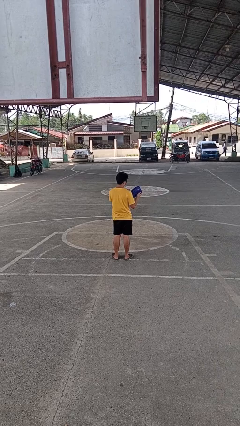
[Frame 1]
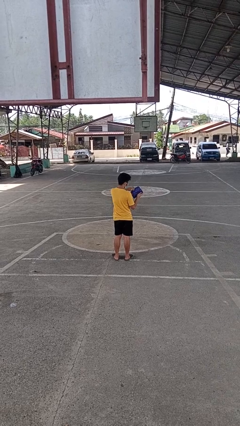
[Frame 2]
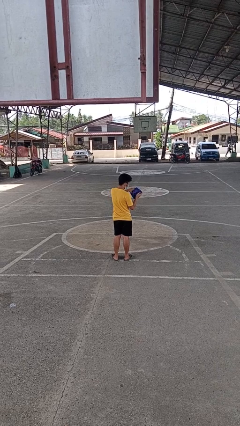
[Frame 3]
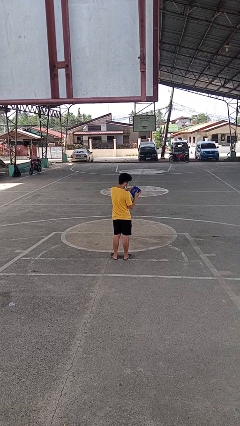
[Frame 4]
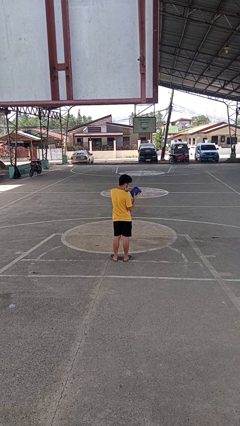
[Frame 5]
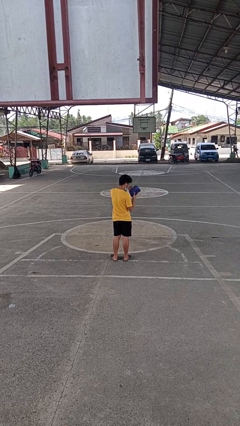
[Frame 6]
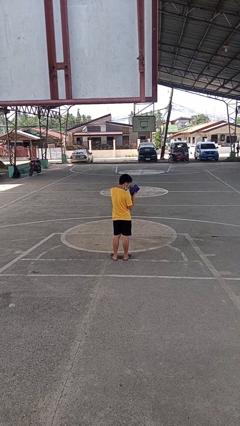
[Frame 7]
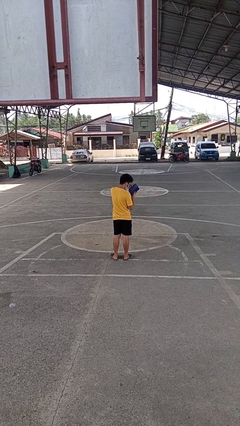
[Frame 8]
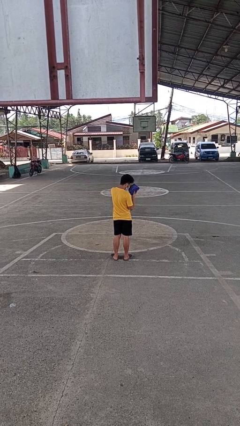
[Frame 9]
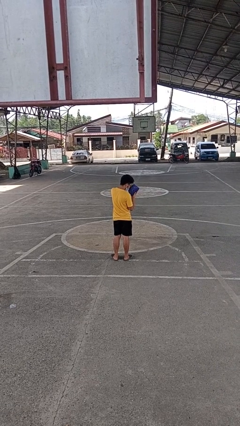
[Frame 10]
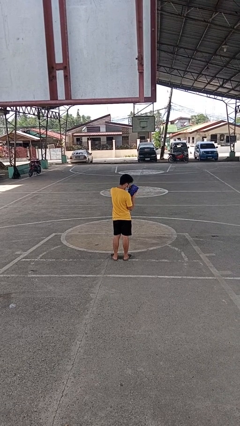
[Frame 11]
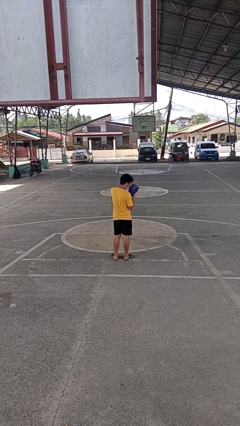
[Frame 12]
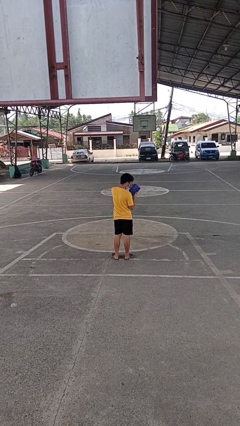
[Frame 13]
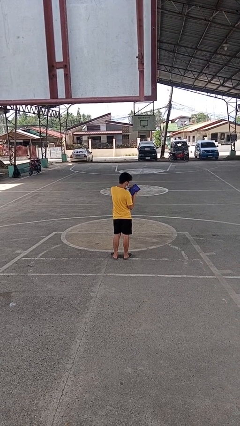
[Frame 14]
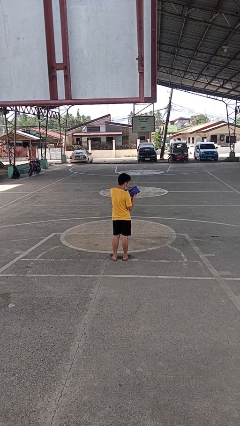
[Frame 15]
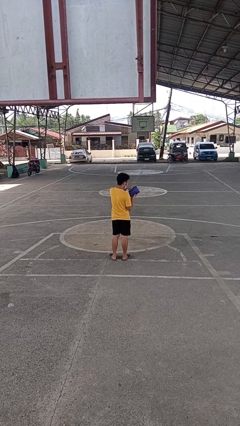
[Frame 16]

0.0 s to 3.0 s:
person searches in purse

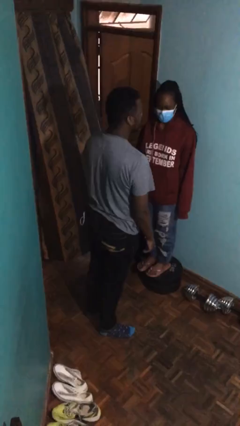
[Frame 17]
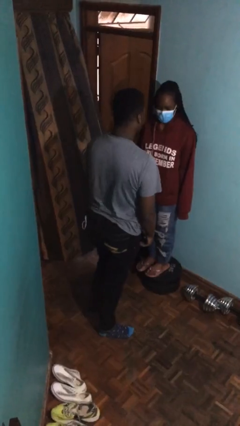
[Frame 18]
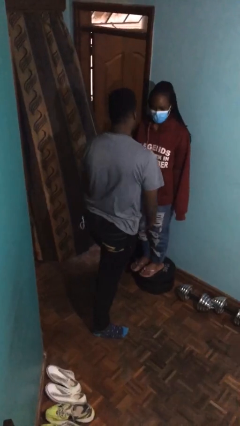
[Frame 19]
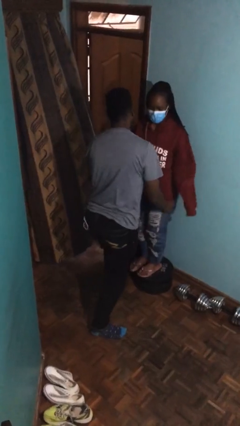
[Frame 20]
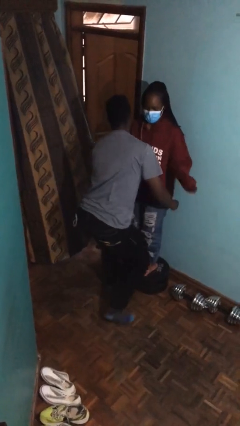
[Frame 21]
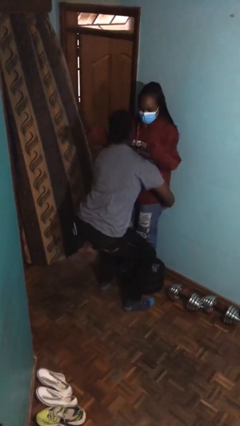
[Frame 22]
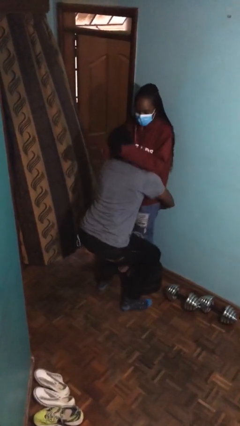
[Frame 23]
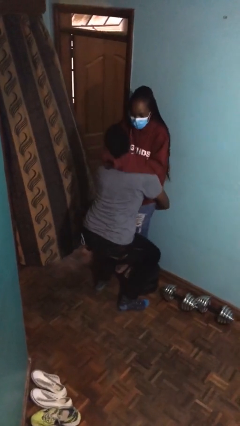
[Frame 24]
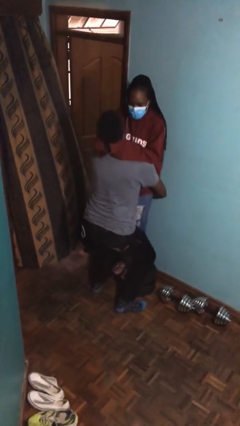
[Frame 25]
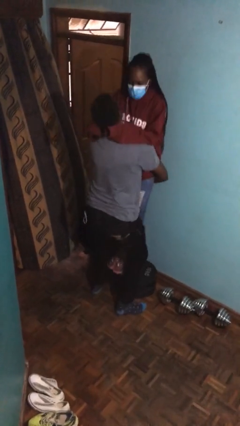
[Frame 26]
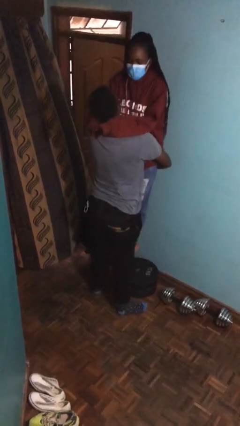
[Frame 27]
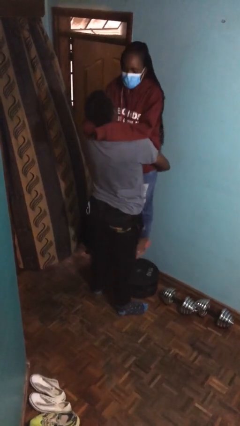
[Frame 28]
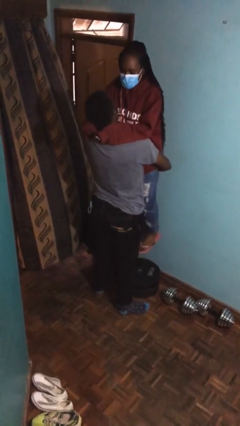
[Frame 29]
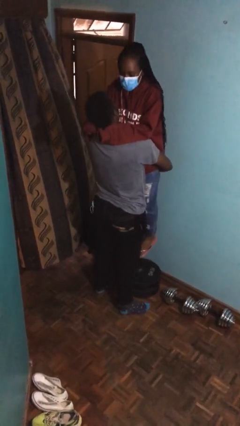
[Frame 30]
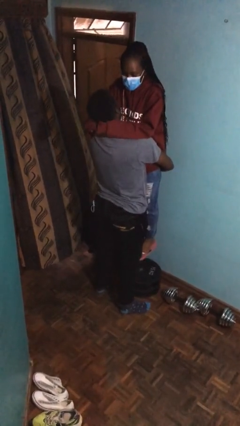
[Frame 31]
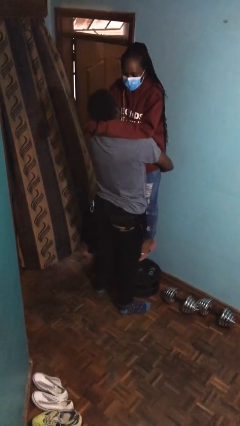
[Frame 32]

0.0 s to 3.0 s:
person picks up person

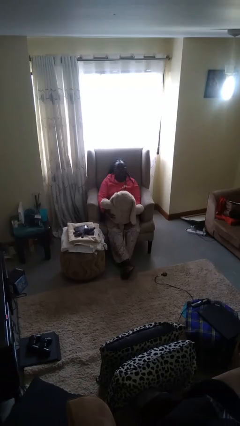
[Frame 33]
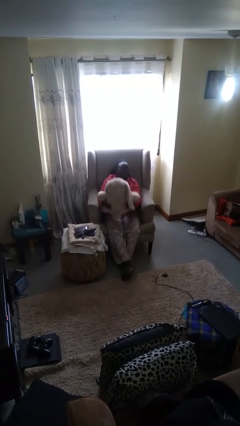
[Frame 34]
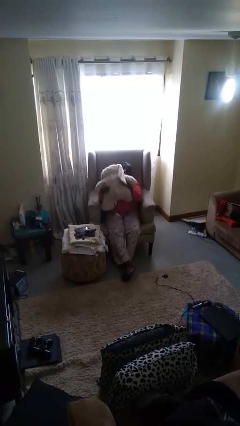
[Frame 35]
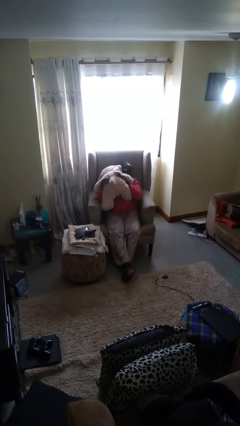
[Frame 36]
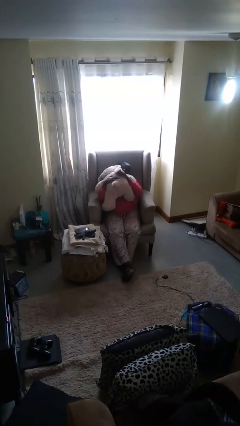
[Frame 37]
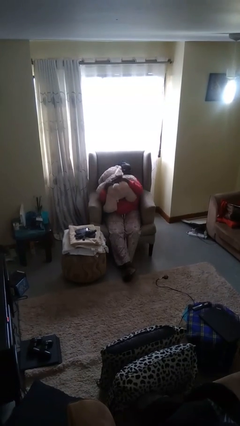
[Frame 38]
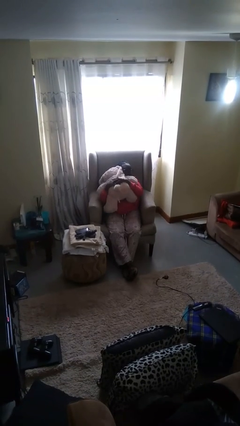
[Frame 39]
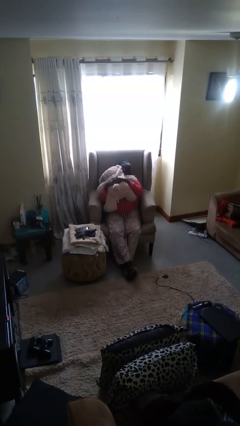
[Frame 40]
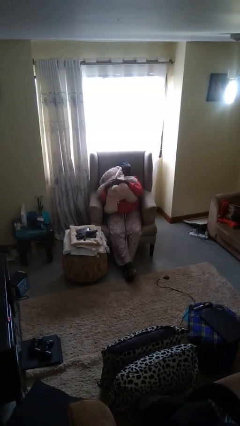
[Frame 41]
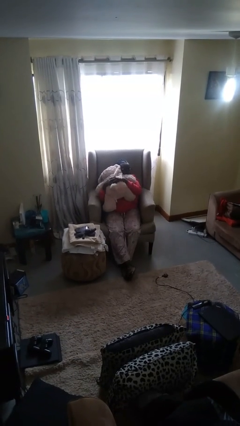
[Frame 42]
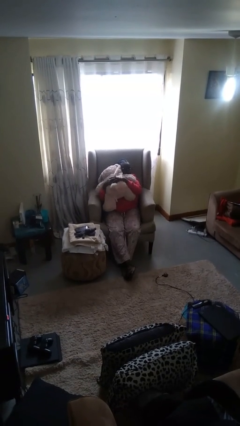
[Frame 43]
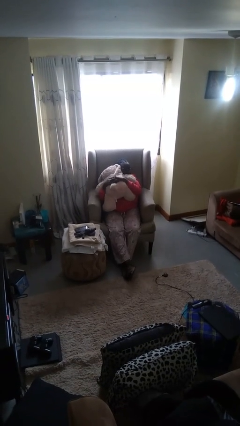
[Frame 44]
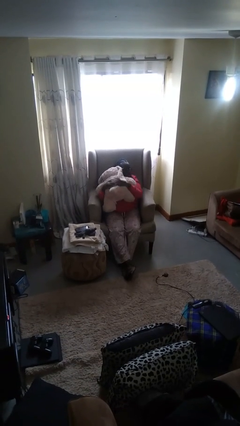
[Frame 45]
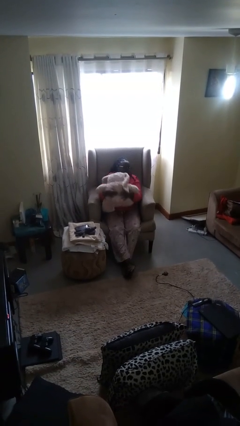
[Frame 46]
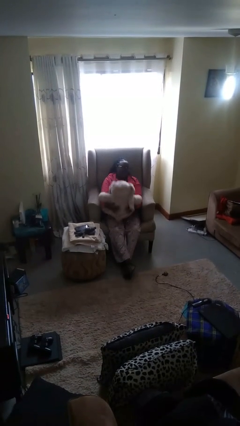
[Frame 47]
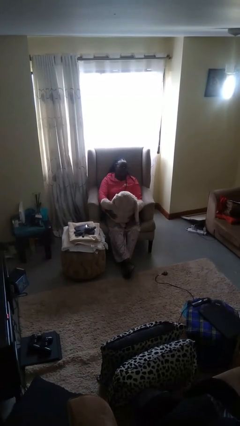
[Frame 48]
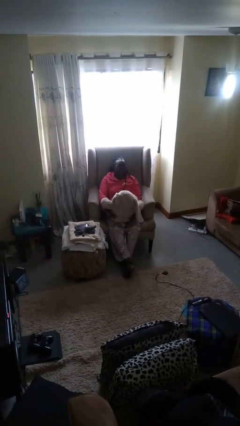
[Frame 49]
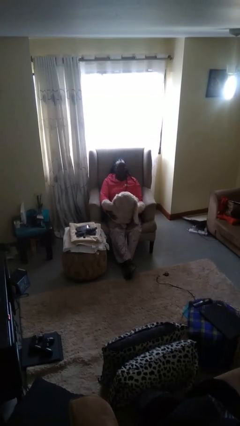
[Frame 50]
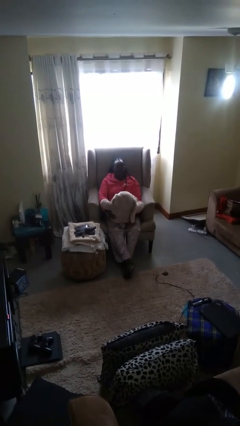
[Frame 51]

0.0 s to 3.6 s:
person hugs stuffed animal

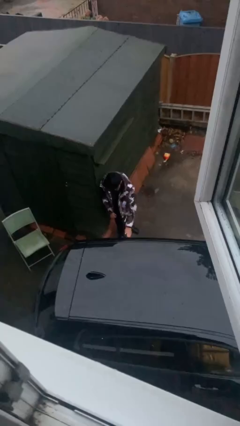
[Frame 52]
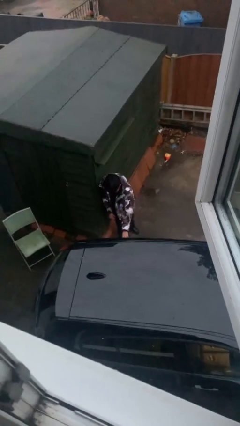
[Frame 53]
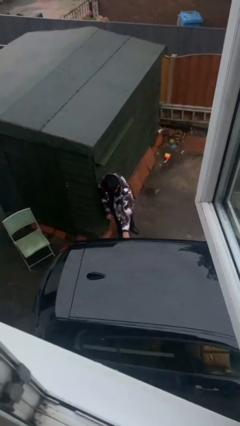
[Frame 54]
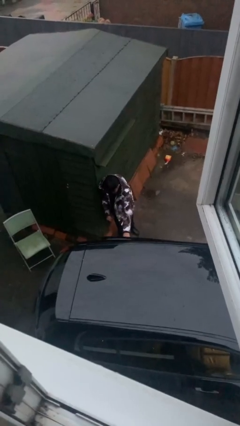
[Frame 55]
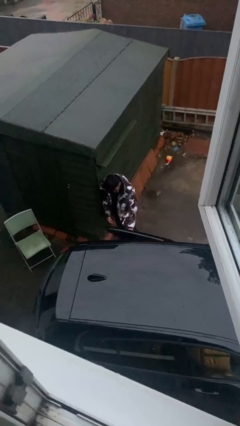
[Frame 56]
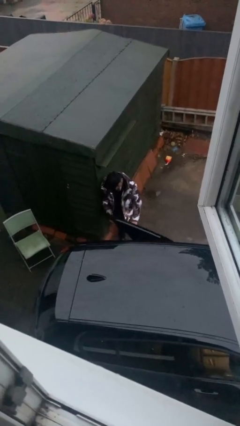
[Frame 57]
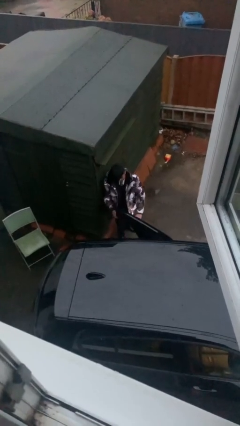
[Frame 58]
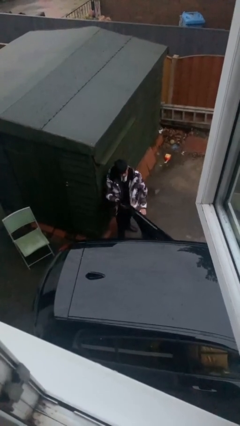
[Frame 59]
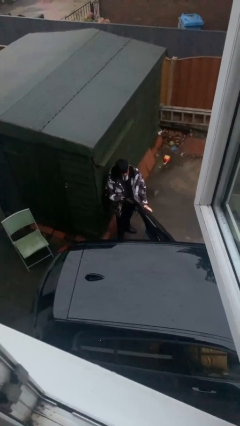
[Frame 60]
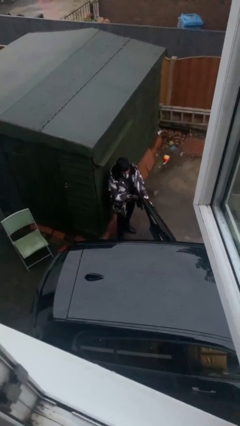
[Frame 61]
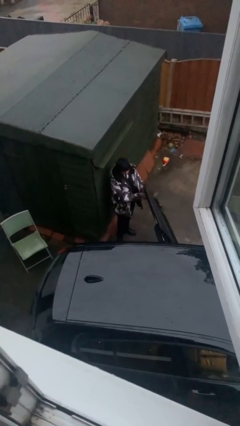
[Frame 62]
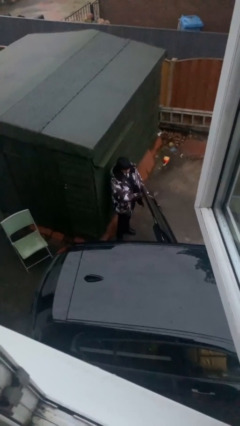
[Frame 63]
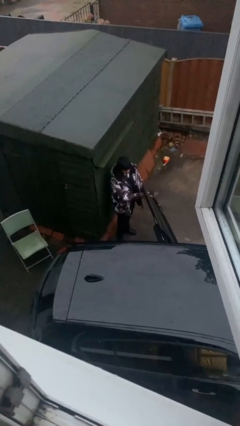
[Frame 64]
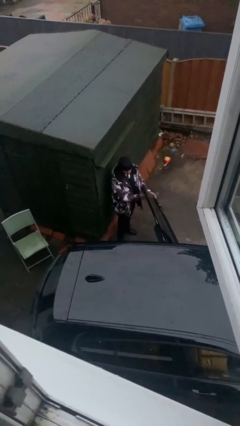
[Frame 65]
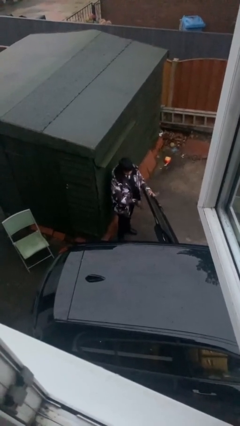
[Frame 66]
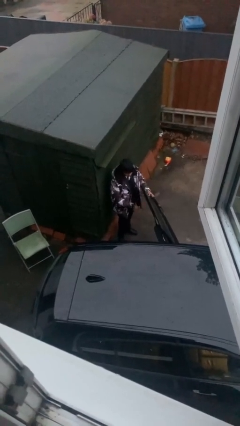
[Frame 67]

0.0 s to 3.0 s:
person opens car door

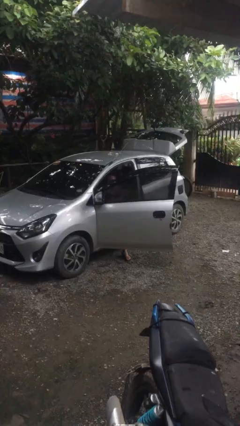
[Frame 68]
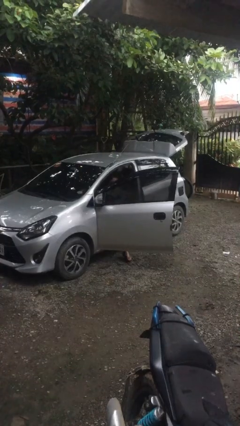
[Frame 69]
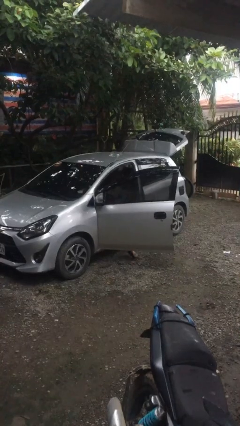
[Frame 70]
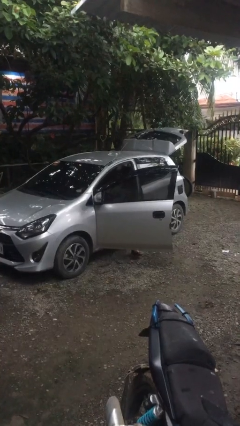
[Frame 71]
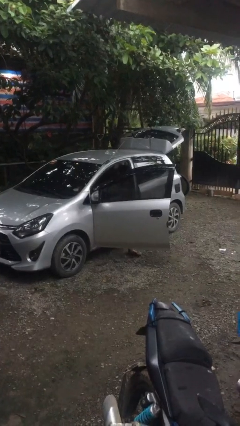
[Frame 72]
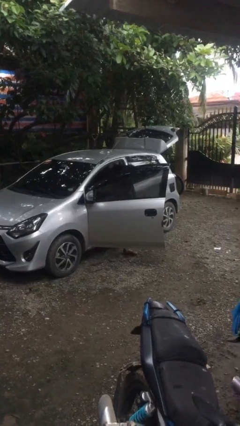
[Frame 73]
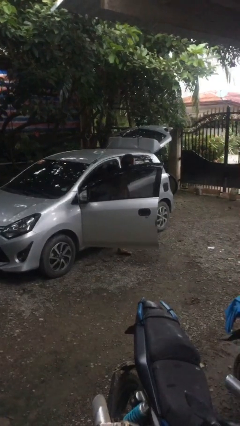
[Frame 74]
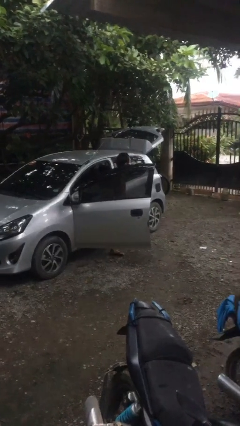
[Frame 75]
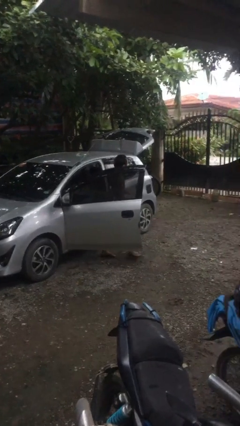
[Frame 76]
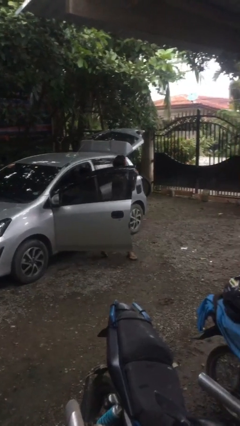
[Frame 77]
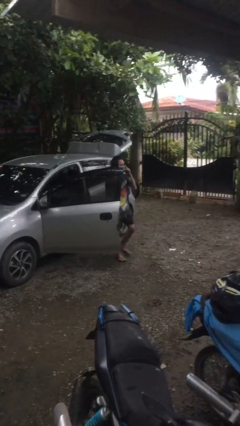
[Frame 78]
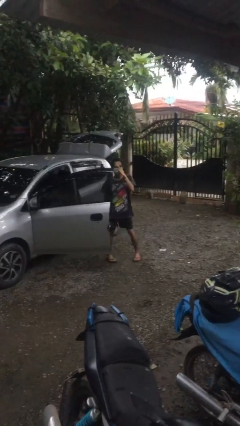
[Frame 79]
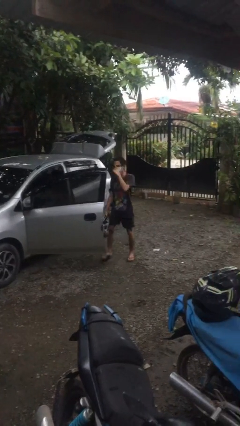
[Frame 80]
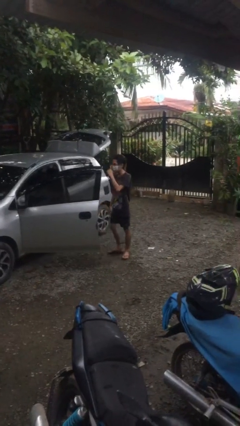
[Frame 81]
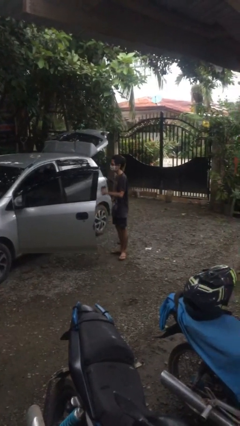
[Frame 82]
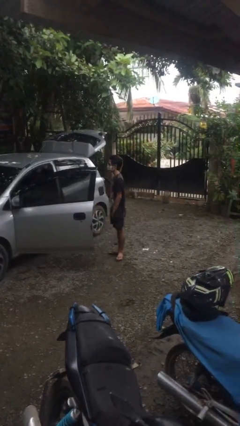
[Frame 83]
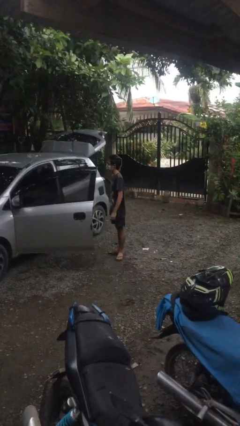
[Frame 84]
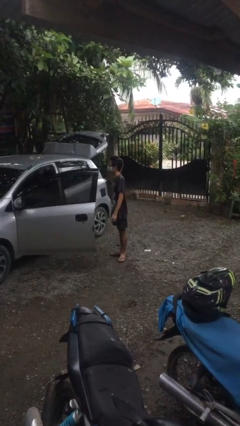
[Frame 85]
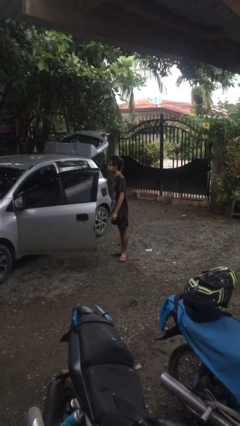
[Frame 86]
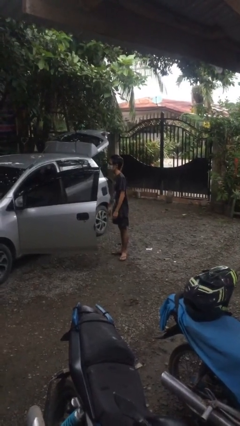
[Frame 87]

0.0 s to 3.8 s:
person exits car

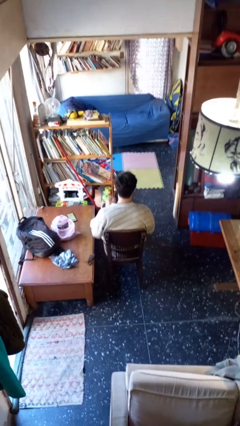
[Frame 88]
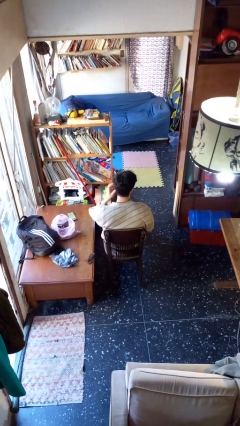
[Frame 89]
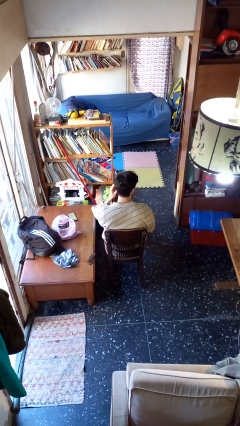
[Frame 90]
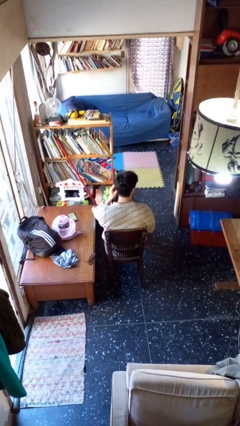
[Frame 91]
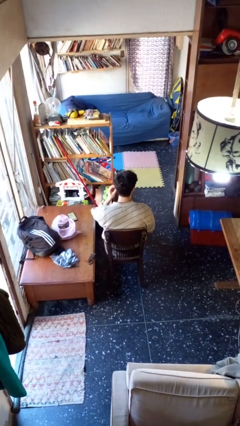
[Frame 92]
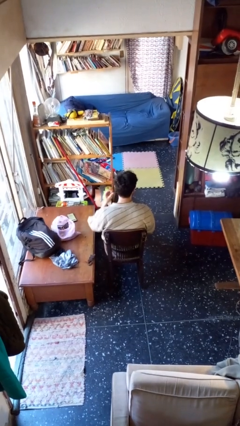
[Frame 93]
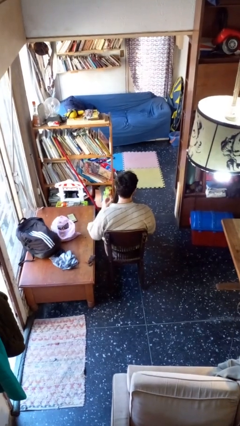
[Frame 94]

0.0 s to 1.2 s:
person takes off earrings
